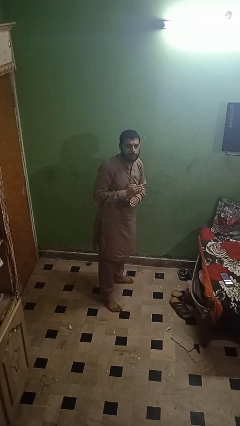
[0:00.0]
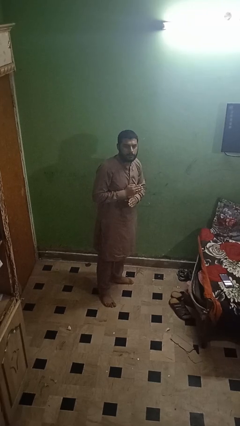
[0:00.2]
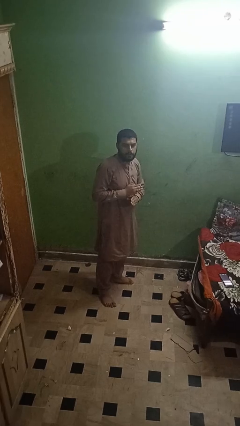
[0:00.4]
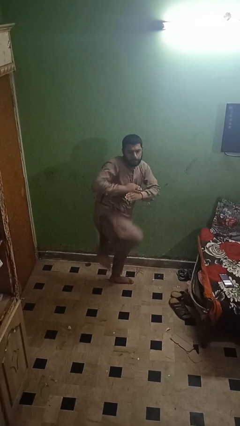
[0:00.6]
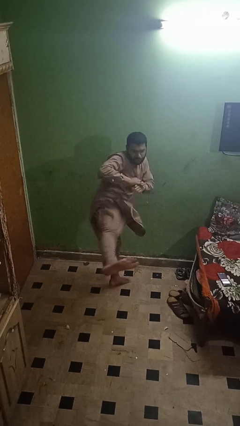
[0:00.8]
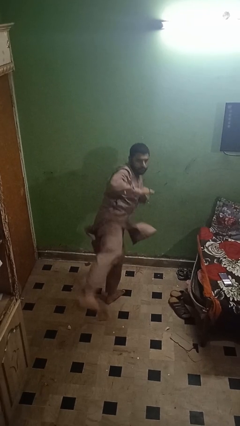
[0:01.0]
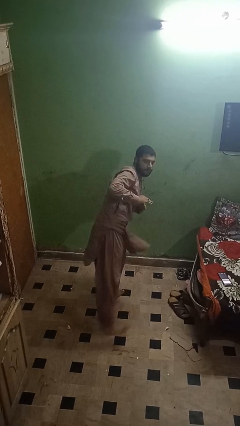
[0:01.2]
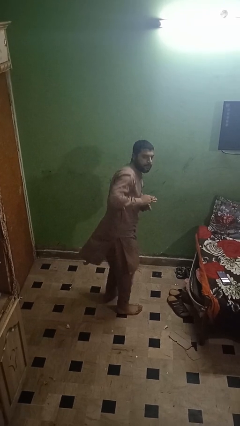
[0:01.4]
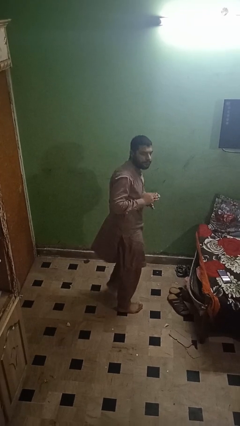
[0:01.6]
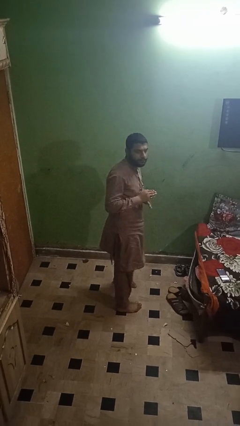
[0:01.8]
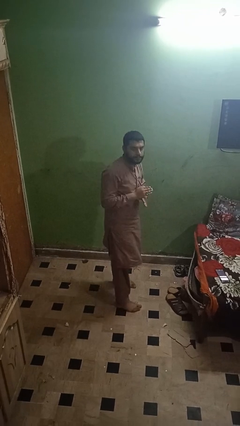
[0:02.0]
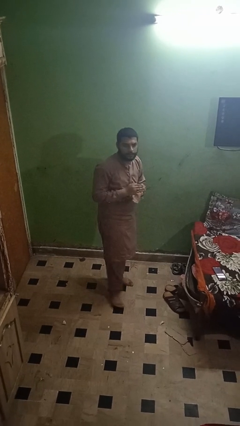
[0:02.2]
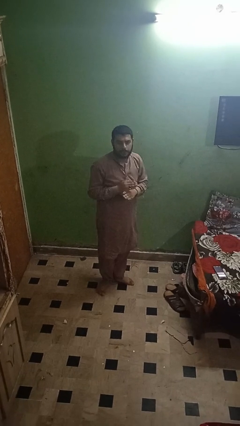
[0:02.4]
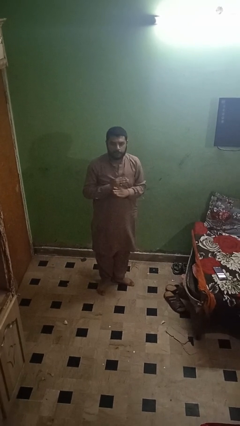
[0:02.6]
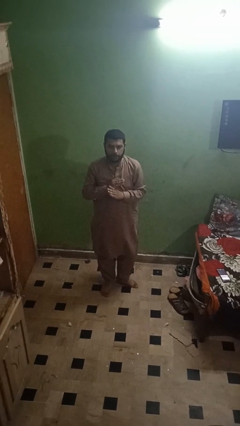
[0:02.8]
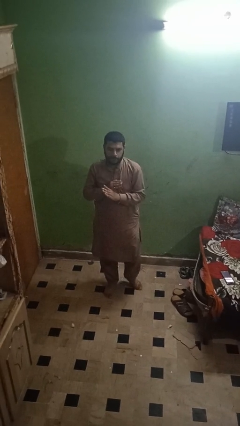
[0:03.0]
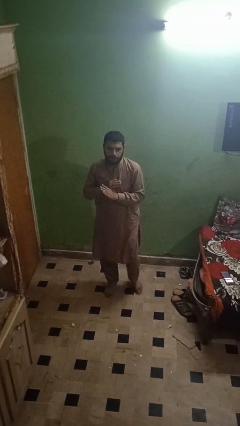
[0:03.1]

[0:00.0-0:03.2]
person karate kicks

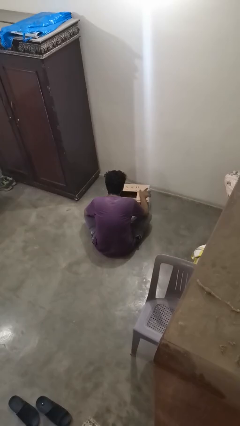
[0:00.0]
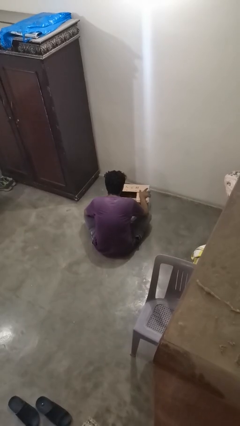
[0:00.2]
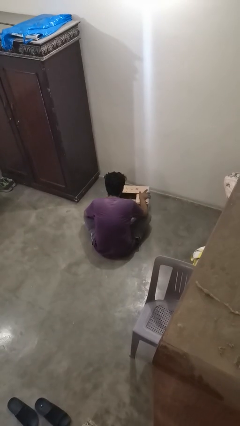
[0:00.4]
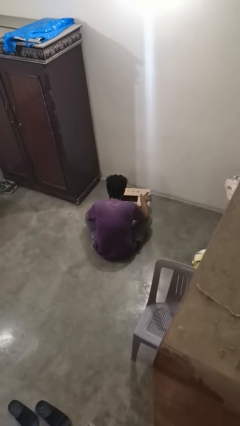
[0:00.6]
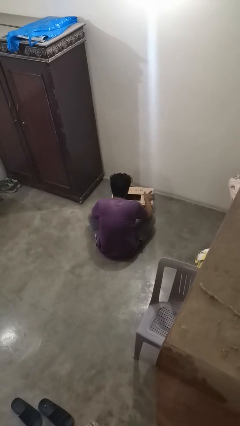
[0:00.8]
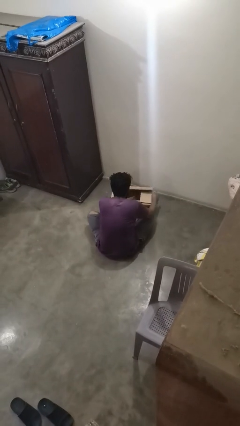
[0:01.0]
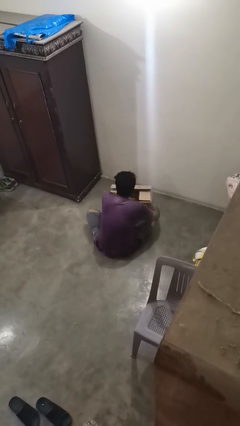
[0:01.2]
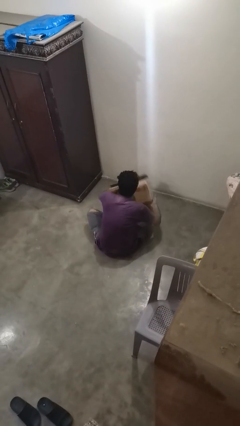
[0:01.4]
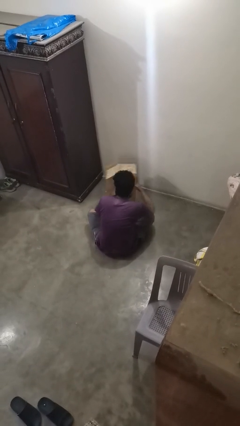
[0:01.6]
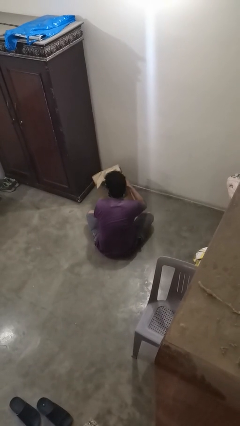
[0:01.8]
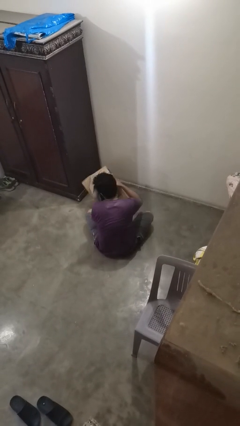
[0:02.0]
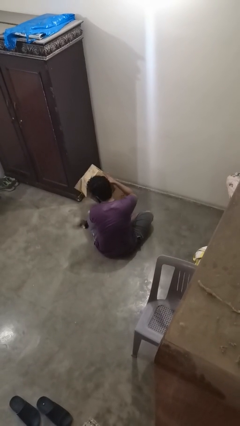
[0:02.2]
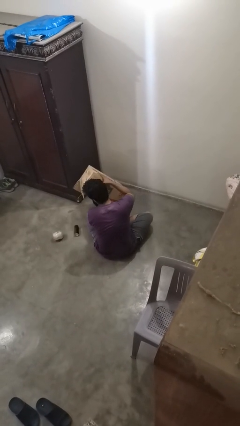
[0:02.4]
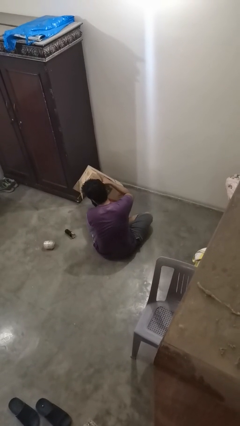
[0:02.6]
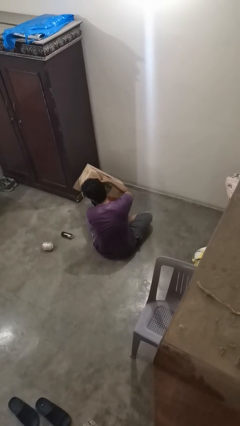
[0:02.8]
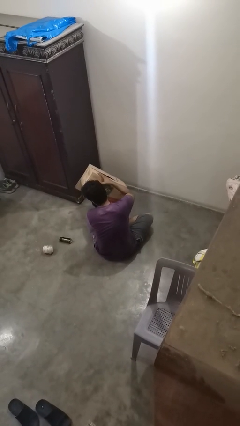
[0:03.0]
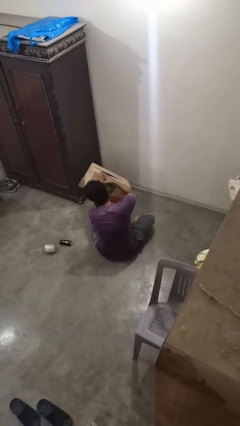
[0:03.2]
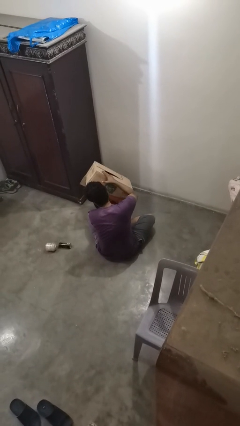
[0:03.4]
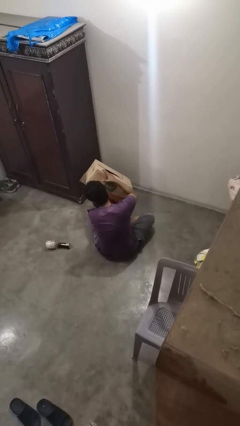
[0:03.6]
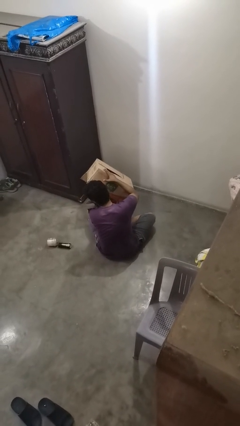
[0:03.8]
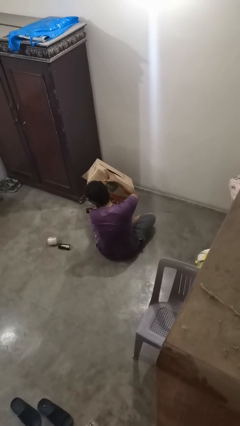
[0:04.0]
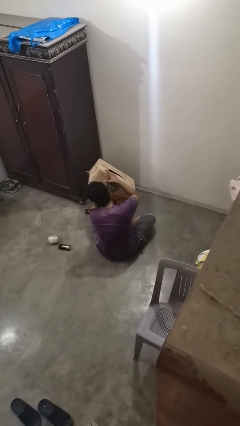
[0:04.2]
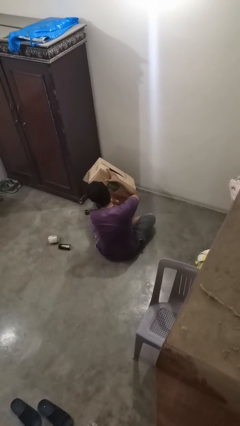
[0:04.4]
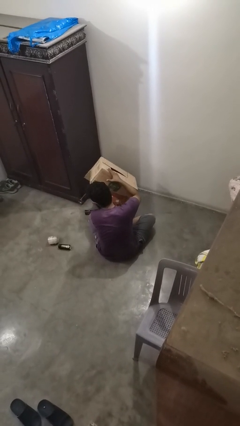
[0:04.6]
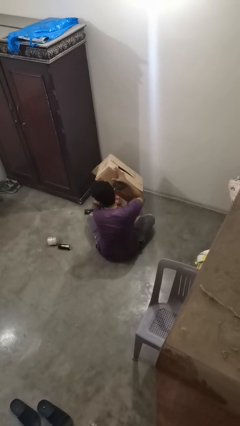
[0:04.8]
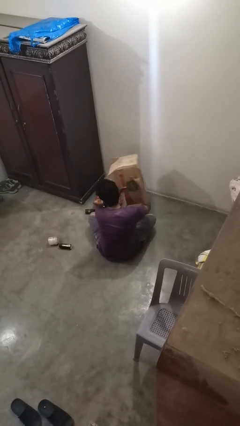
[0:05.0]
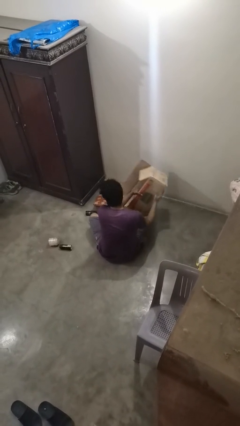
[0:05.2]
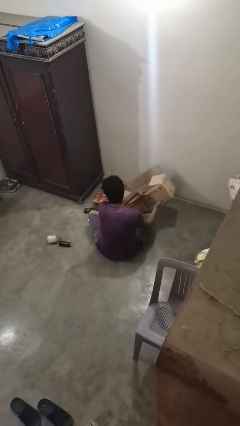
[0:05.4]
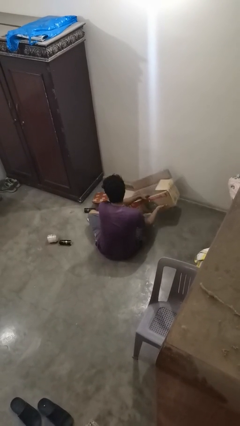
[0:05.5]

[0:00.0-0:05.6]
person unloads box onto floor

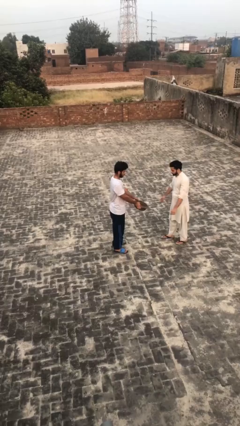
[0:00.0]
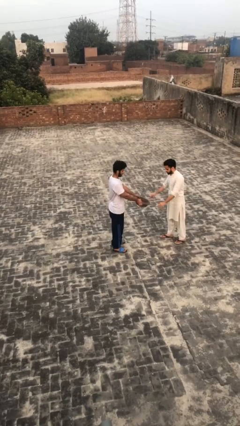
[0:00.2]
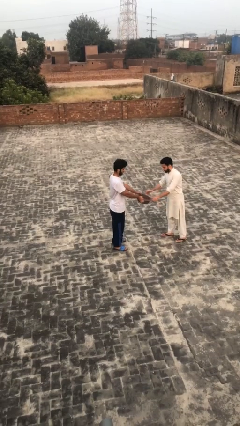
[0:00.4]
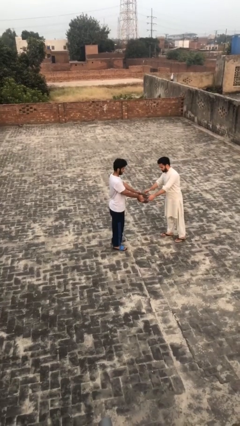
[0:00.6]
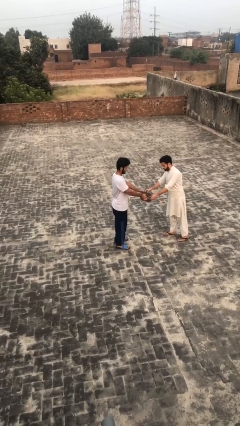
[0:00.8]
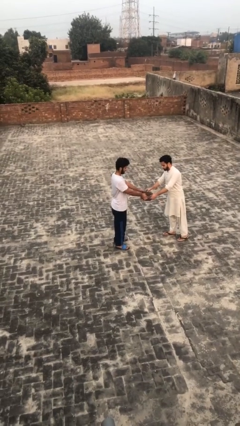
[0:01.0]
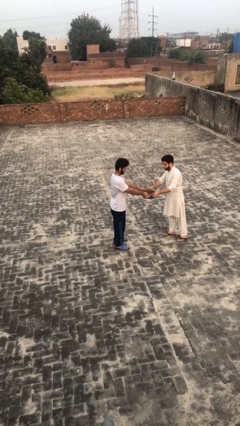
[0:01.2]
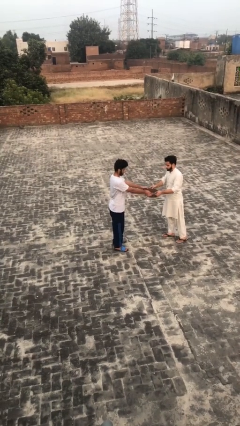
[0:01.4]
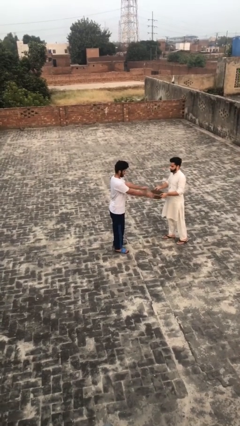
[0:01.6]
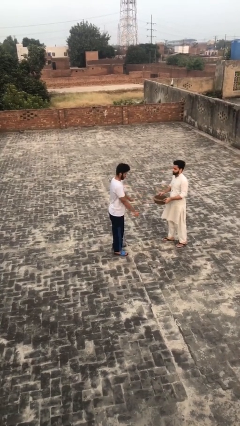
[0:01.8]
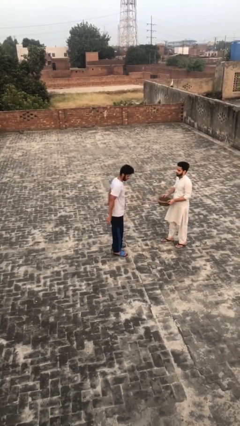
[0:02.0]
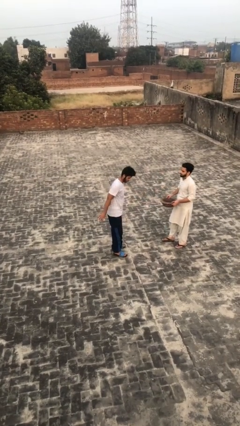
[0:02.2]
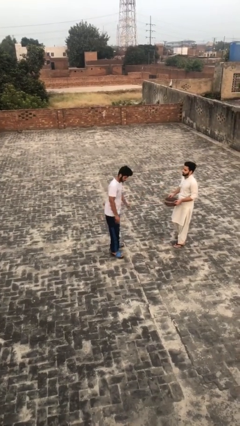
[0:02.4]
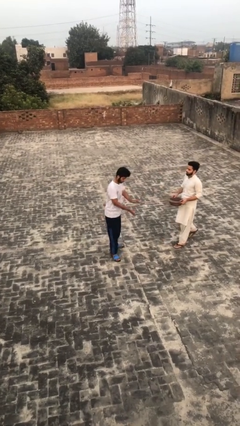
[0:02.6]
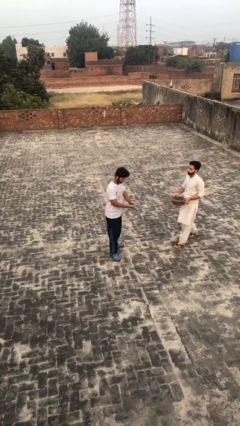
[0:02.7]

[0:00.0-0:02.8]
person transfers object to person

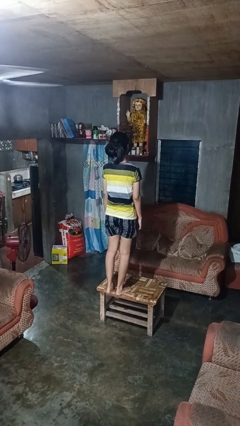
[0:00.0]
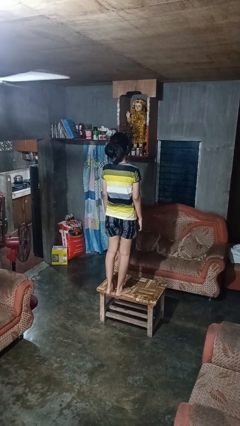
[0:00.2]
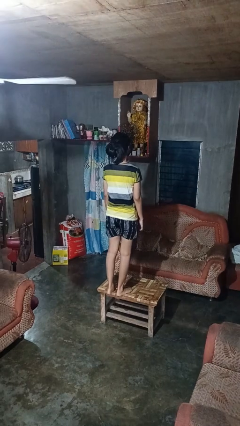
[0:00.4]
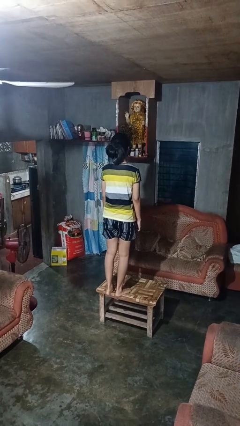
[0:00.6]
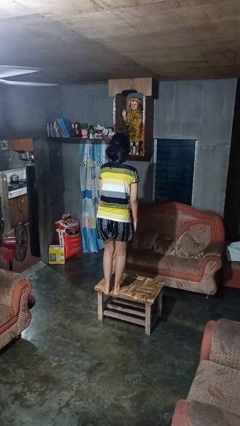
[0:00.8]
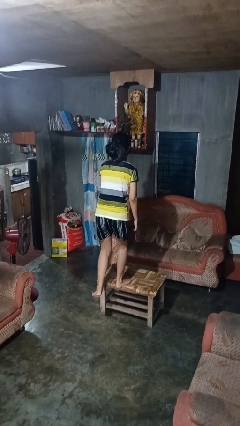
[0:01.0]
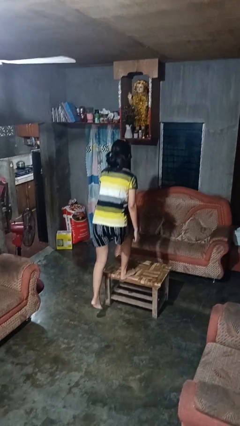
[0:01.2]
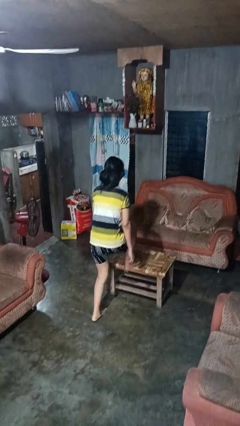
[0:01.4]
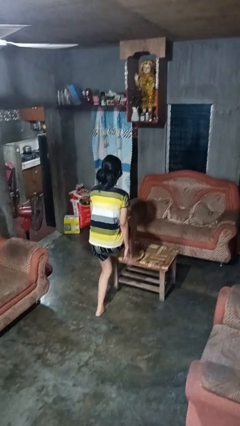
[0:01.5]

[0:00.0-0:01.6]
person climbs off table

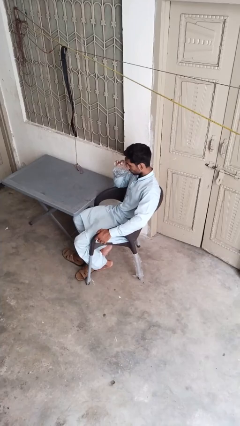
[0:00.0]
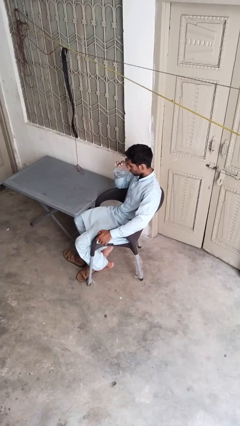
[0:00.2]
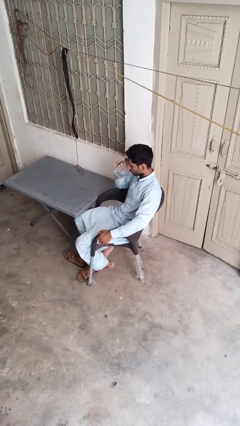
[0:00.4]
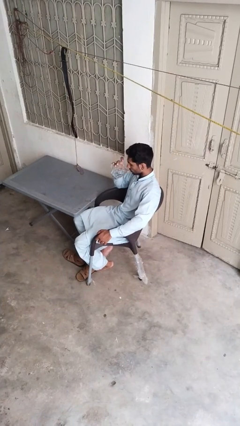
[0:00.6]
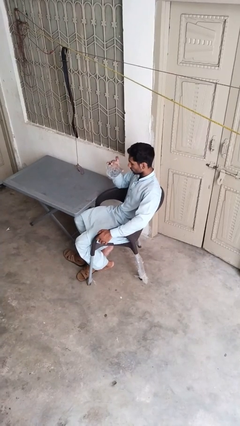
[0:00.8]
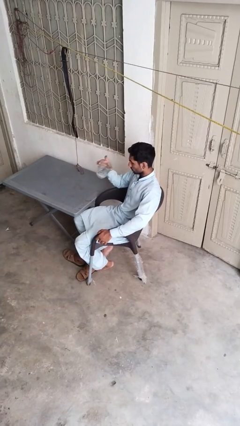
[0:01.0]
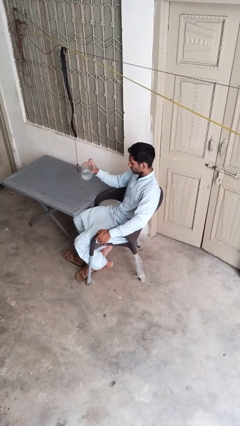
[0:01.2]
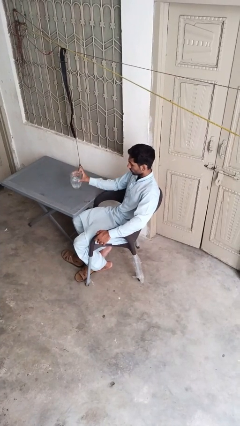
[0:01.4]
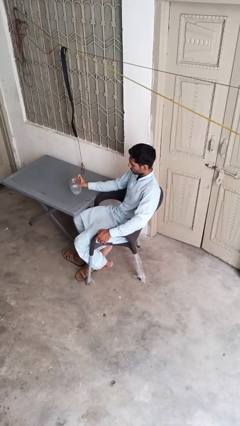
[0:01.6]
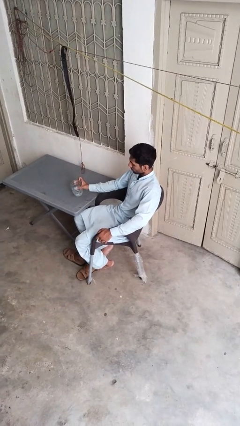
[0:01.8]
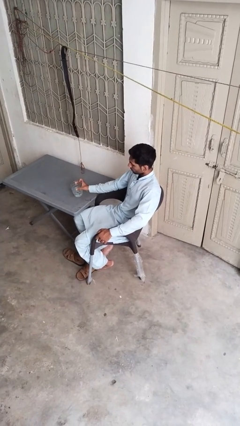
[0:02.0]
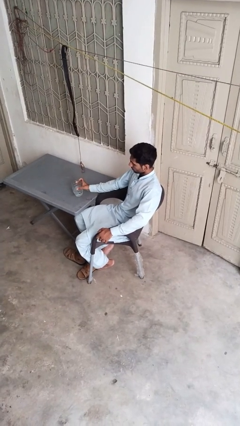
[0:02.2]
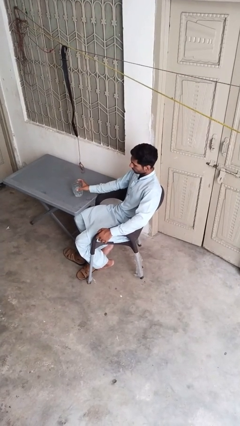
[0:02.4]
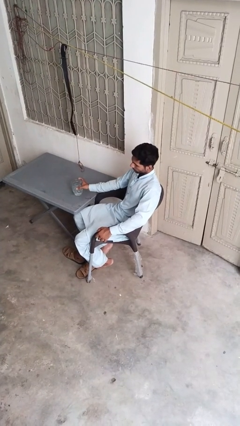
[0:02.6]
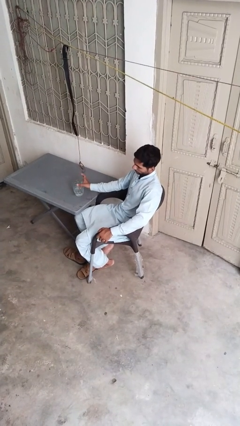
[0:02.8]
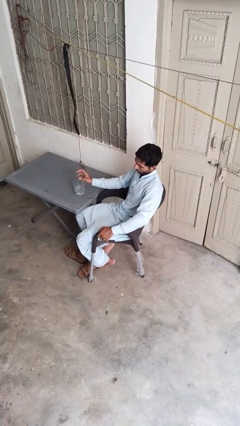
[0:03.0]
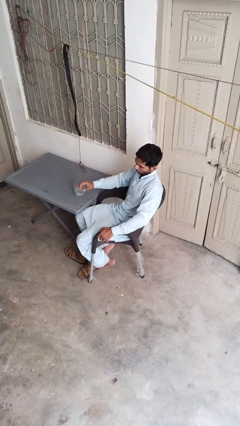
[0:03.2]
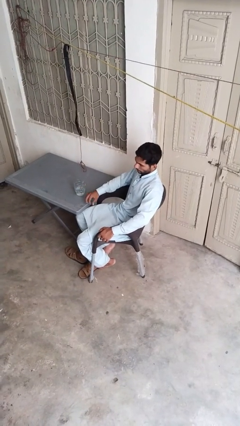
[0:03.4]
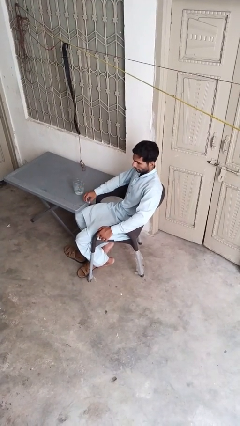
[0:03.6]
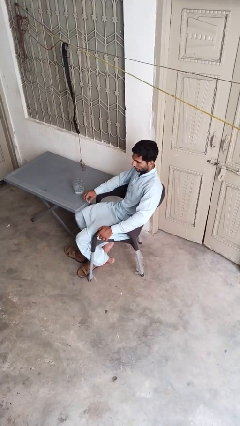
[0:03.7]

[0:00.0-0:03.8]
person puts down object on table

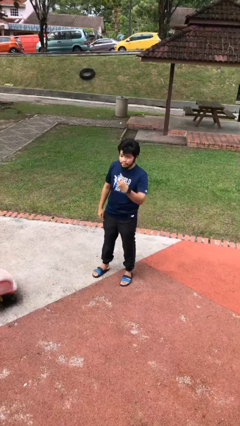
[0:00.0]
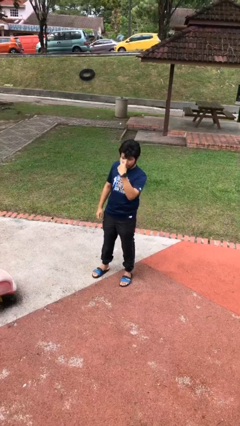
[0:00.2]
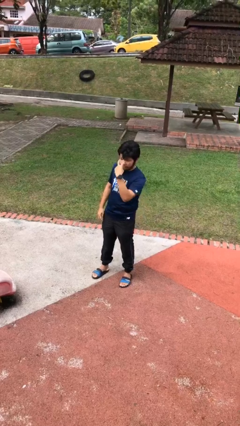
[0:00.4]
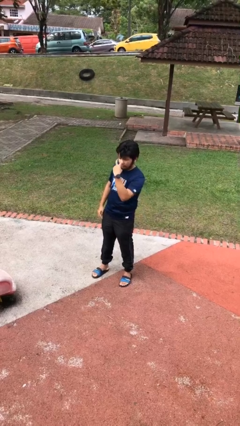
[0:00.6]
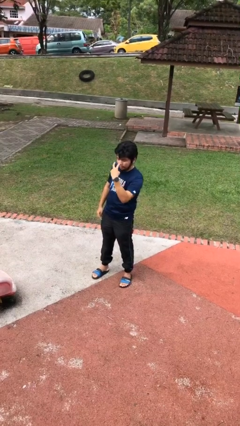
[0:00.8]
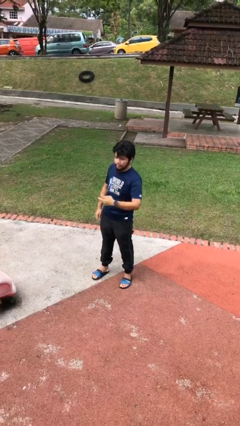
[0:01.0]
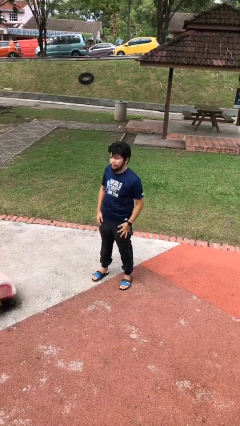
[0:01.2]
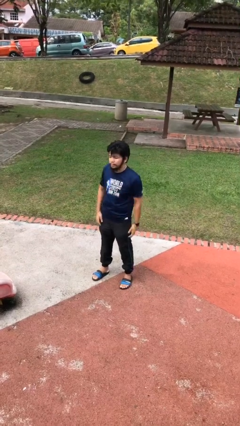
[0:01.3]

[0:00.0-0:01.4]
person gestures watch closely
